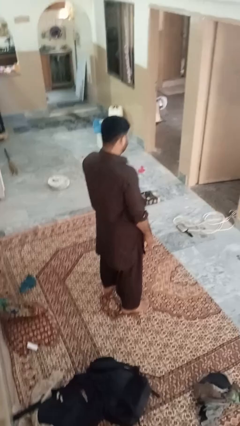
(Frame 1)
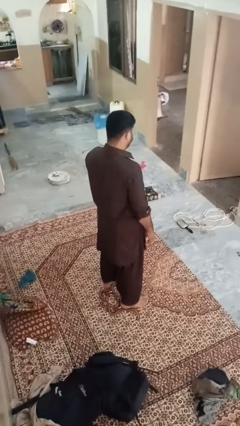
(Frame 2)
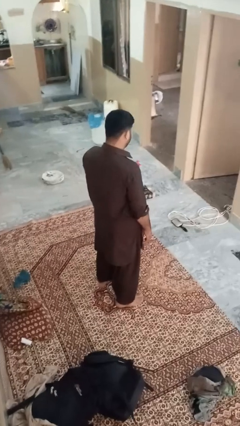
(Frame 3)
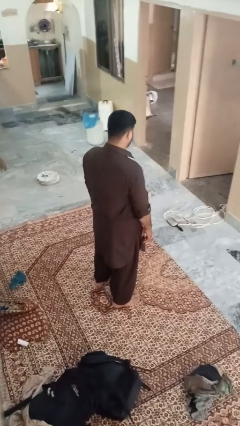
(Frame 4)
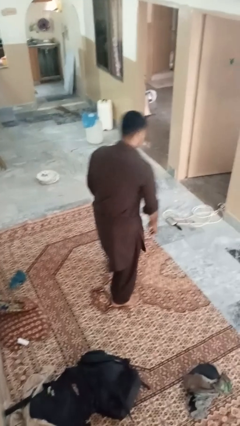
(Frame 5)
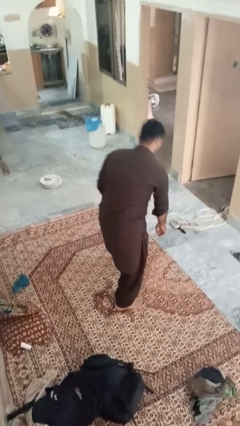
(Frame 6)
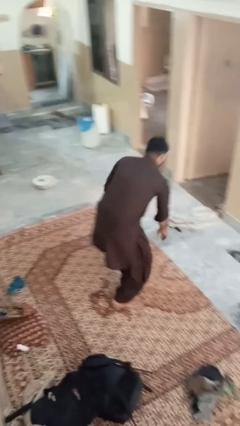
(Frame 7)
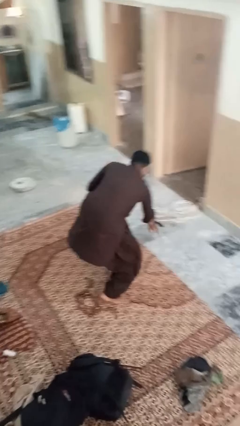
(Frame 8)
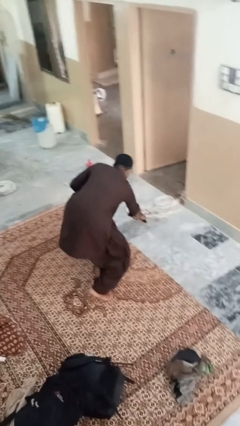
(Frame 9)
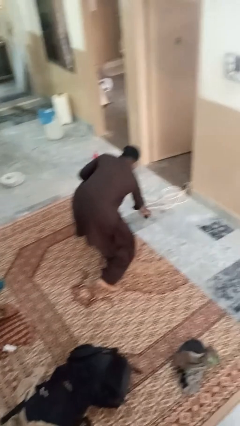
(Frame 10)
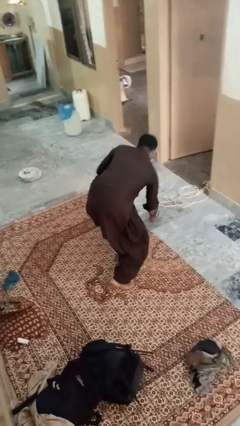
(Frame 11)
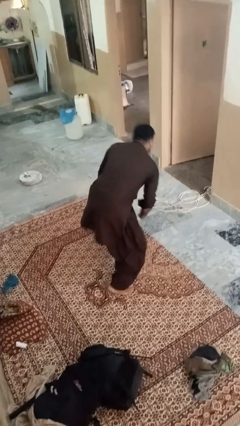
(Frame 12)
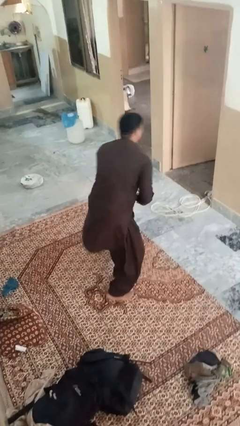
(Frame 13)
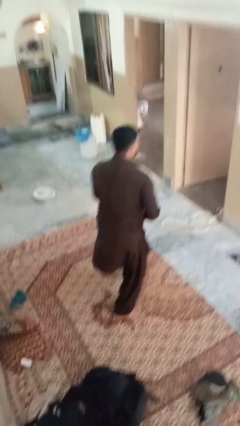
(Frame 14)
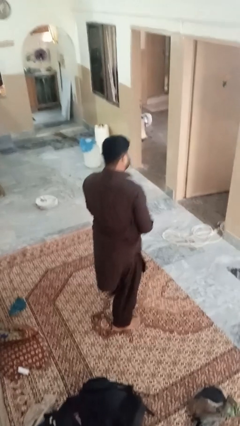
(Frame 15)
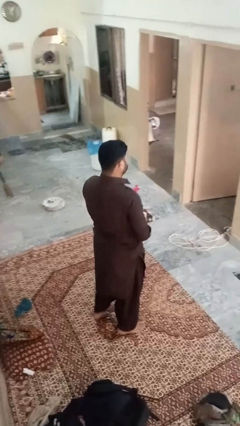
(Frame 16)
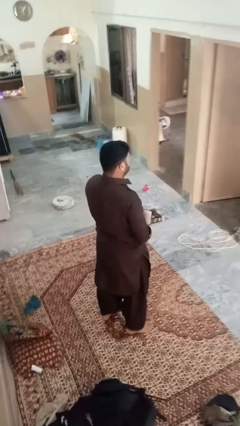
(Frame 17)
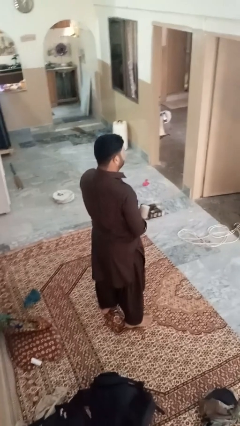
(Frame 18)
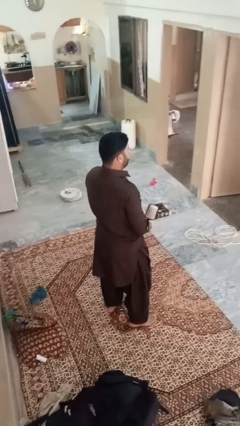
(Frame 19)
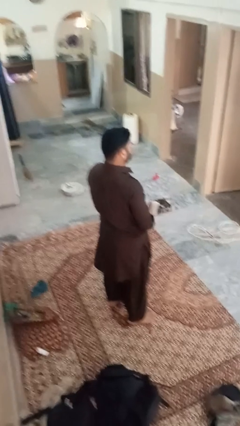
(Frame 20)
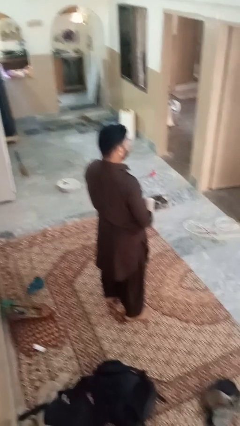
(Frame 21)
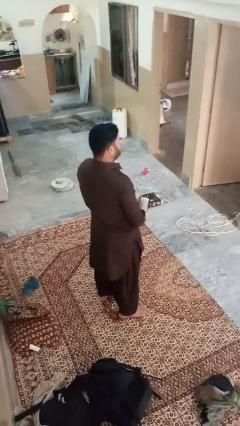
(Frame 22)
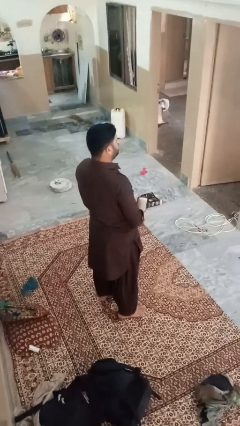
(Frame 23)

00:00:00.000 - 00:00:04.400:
person picks up object from floor

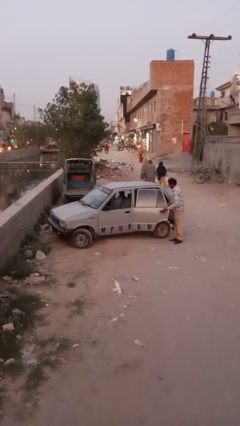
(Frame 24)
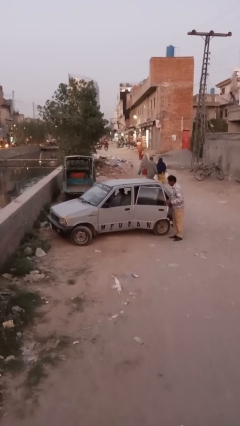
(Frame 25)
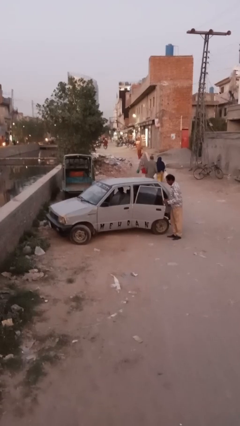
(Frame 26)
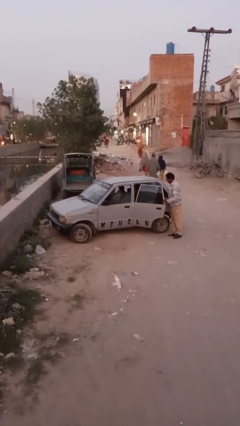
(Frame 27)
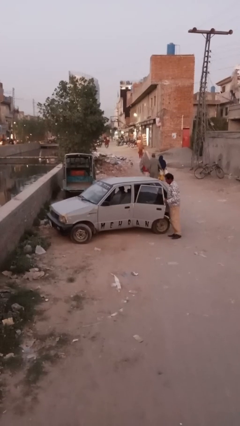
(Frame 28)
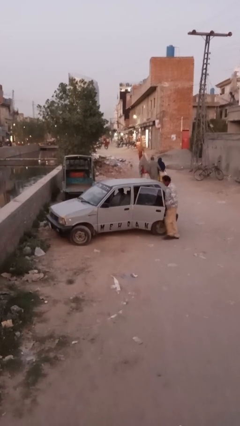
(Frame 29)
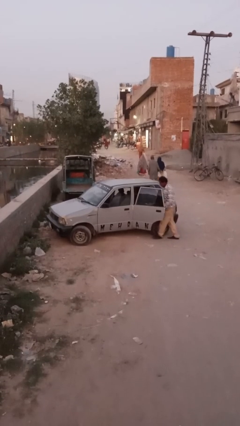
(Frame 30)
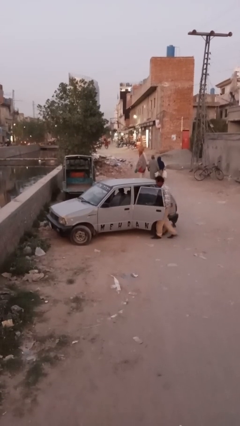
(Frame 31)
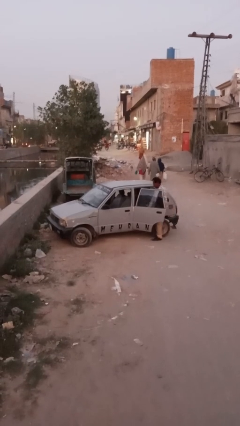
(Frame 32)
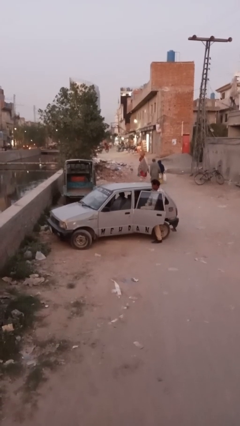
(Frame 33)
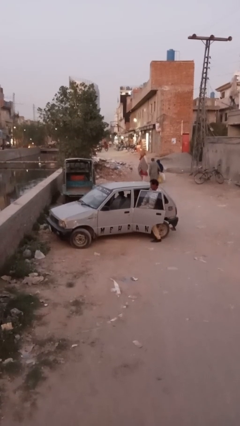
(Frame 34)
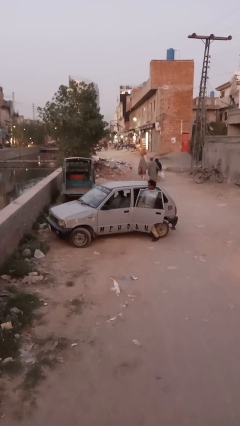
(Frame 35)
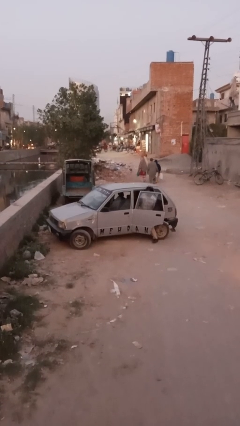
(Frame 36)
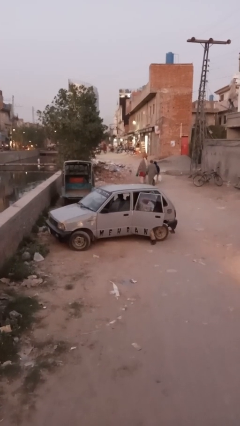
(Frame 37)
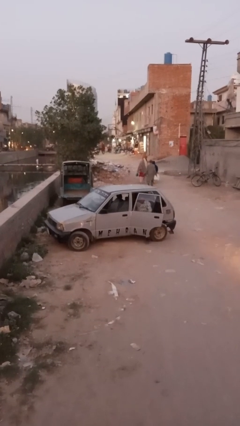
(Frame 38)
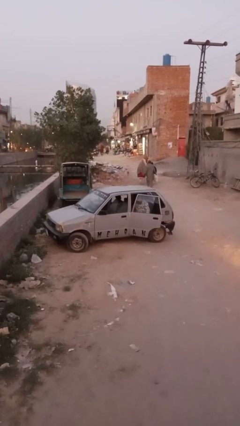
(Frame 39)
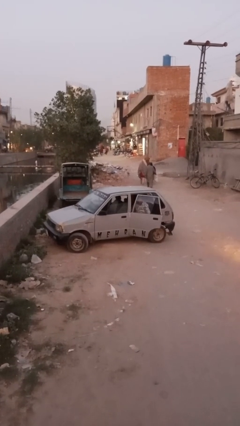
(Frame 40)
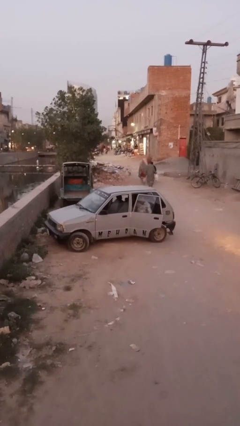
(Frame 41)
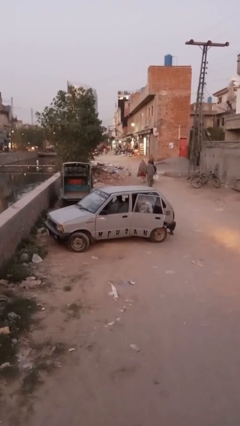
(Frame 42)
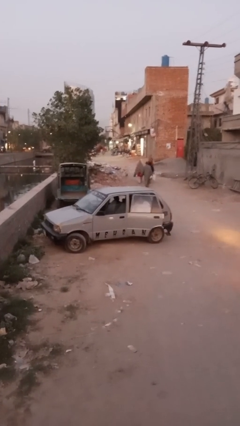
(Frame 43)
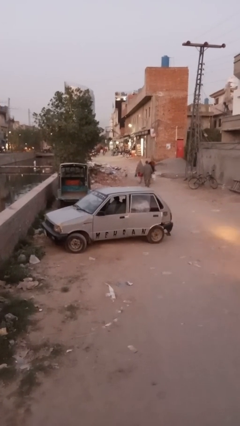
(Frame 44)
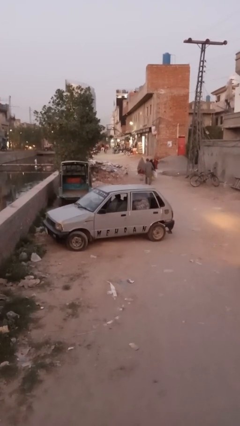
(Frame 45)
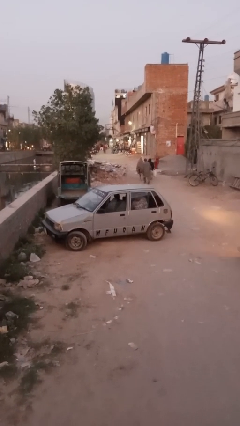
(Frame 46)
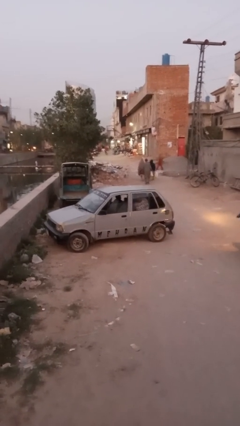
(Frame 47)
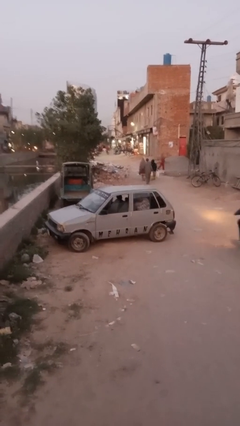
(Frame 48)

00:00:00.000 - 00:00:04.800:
car picks up person

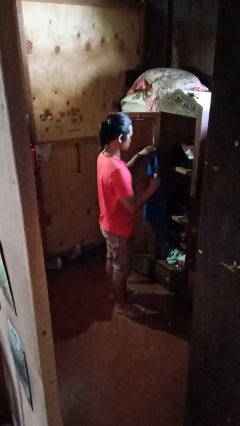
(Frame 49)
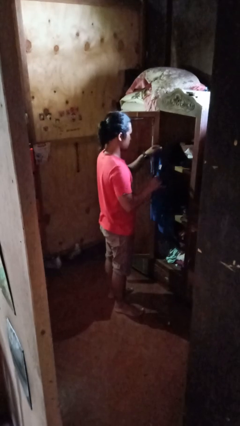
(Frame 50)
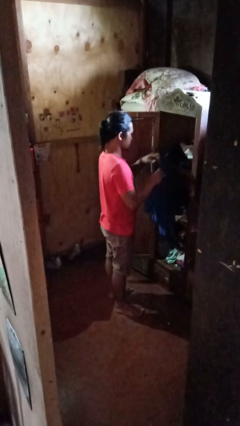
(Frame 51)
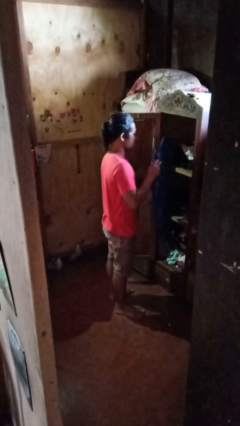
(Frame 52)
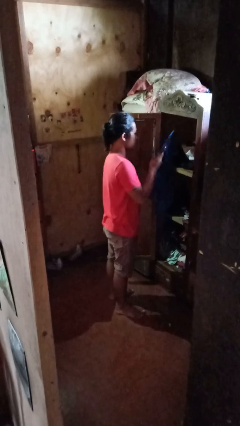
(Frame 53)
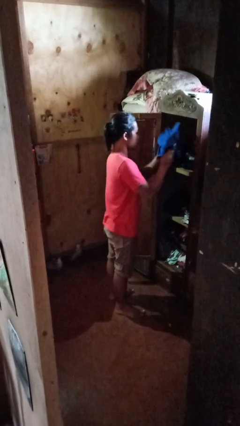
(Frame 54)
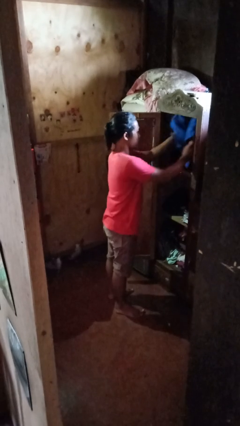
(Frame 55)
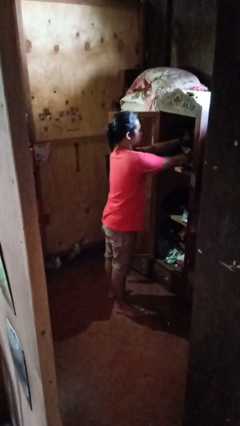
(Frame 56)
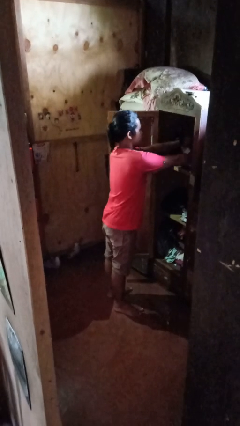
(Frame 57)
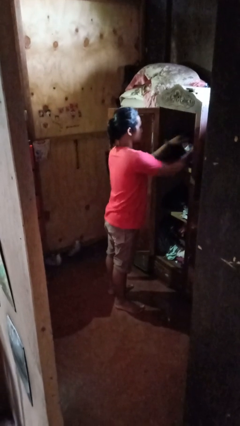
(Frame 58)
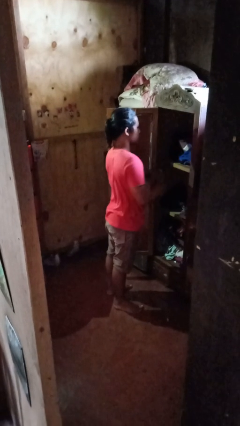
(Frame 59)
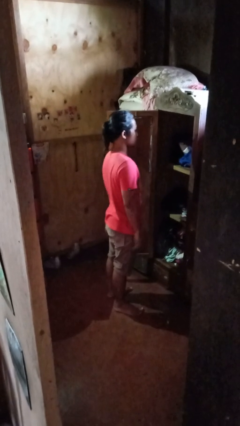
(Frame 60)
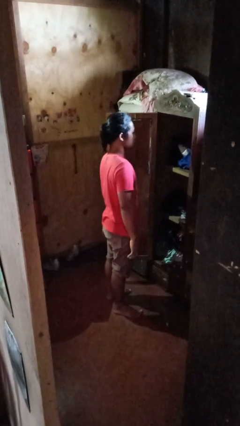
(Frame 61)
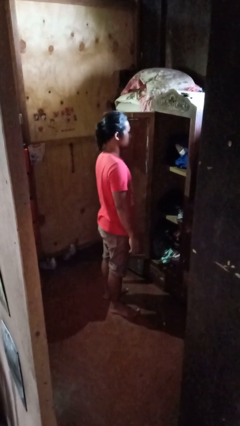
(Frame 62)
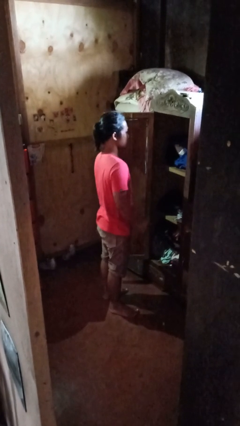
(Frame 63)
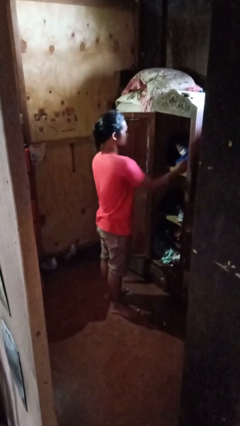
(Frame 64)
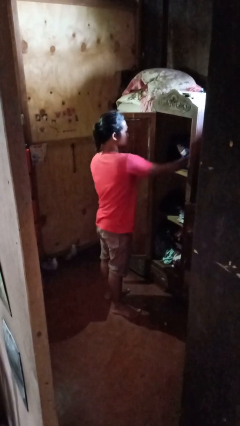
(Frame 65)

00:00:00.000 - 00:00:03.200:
person puts clothes into closet

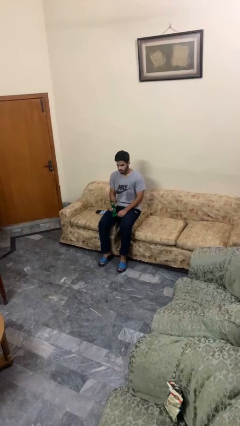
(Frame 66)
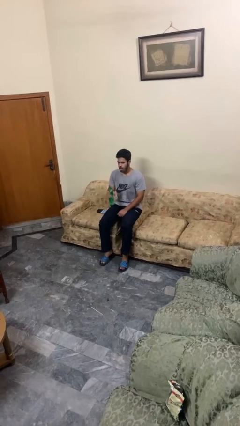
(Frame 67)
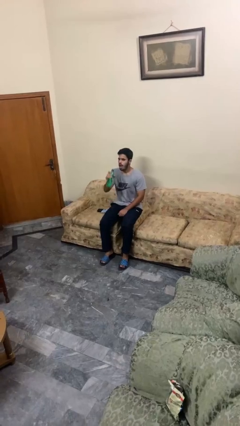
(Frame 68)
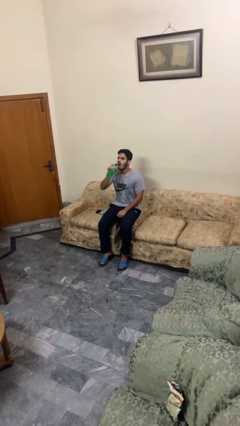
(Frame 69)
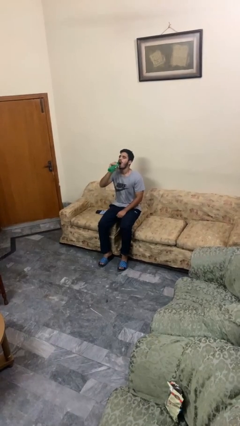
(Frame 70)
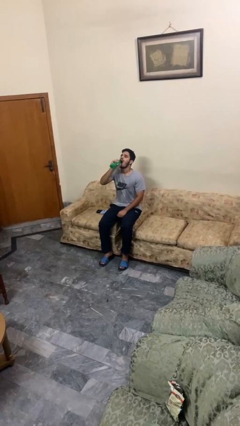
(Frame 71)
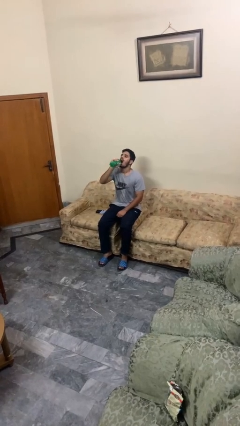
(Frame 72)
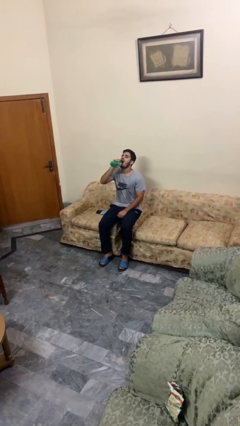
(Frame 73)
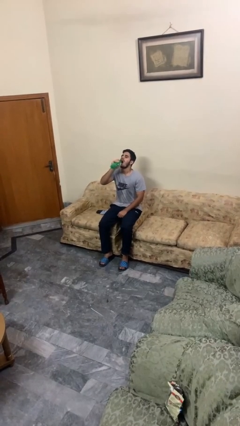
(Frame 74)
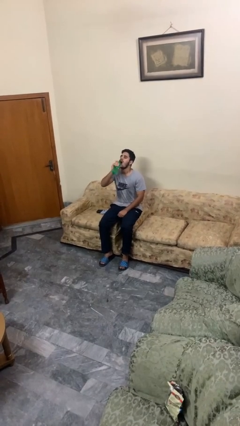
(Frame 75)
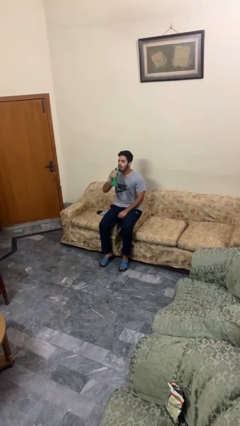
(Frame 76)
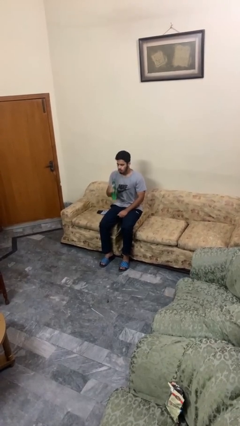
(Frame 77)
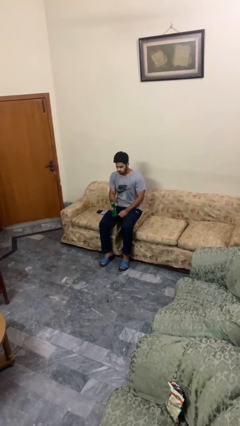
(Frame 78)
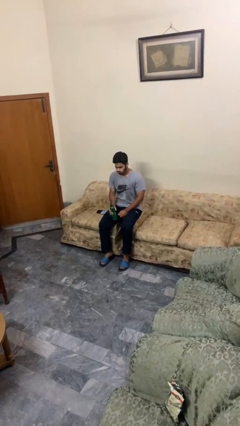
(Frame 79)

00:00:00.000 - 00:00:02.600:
person drinks from bottle

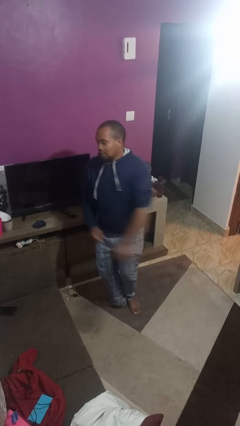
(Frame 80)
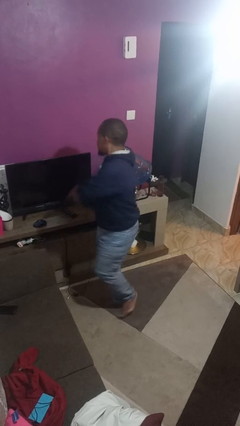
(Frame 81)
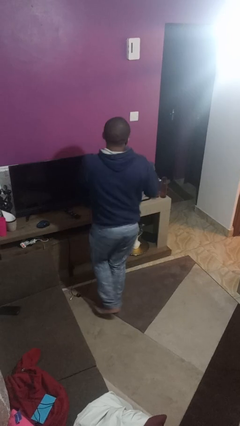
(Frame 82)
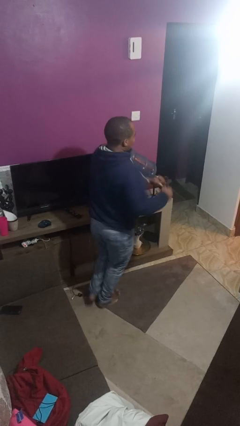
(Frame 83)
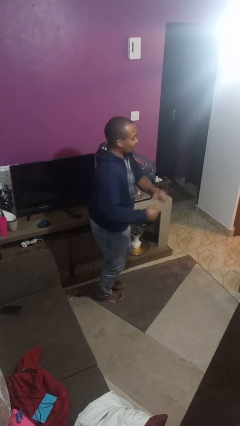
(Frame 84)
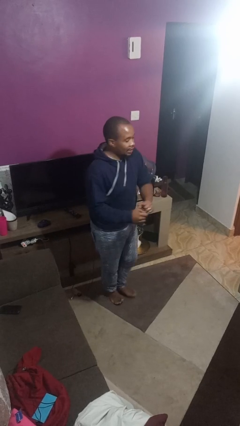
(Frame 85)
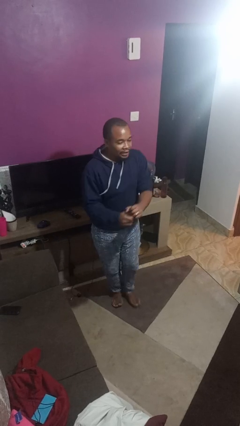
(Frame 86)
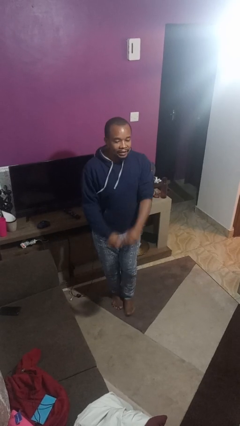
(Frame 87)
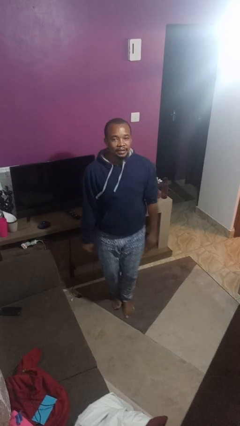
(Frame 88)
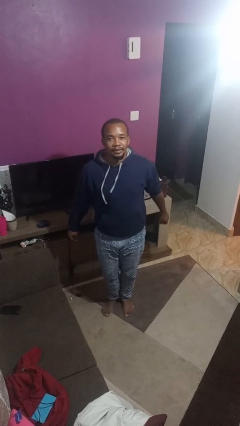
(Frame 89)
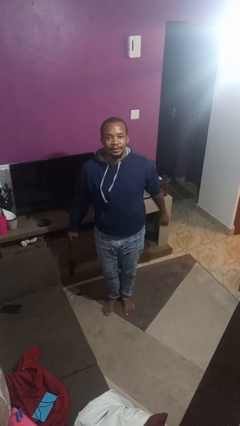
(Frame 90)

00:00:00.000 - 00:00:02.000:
person twirls

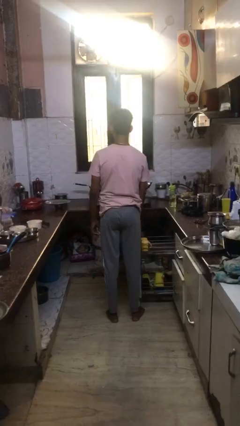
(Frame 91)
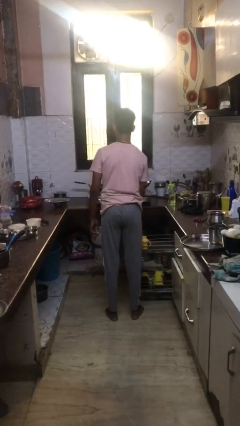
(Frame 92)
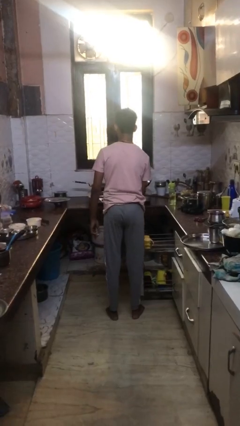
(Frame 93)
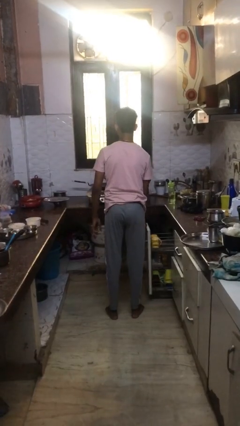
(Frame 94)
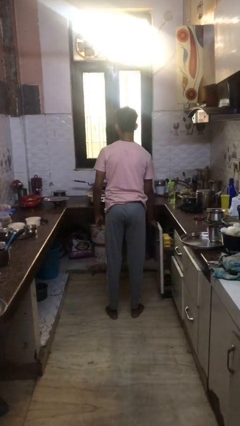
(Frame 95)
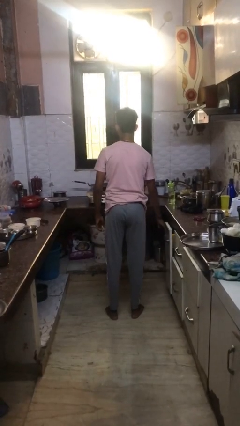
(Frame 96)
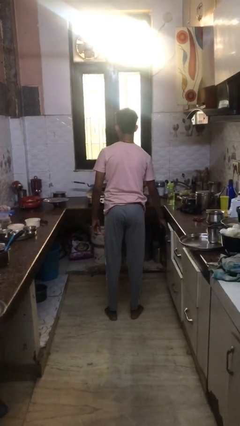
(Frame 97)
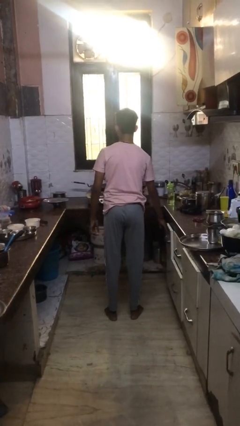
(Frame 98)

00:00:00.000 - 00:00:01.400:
person closes dishwasher
